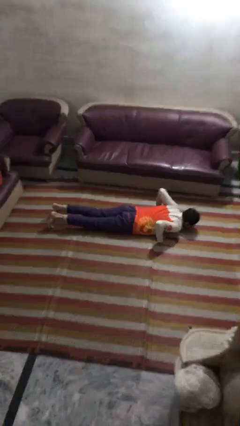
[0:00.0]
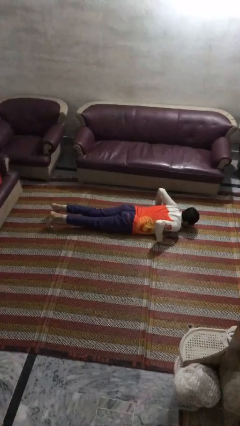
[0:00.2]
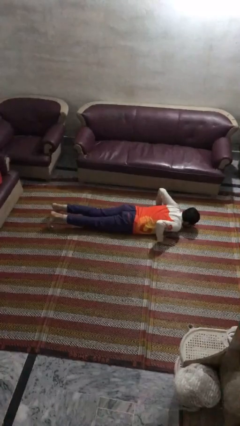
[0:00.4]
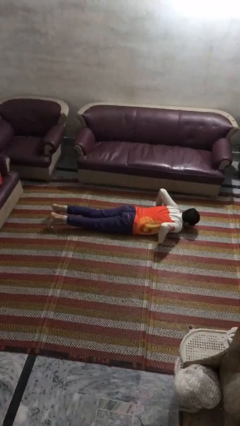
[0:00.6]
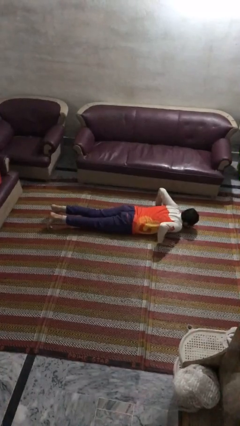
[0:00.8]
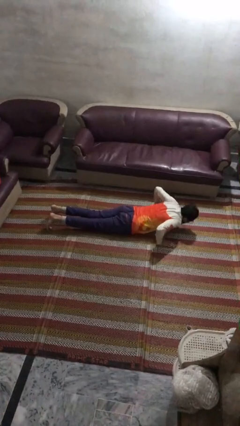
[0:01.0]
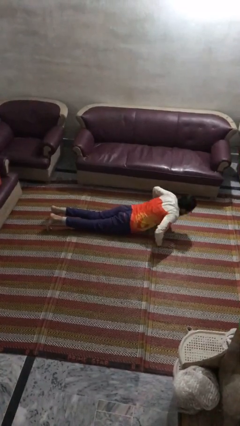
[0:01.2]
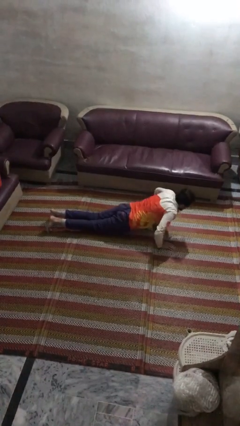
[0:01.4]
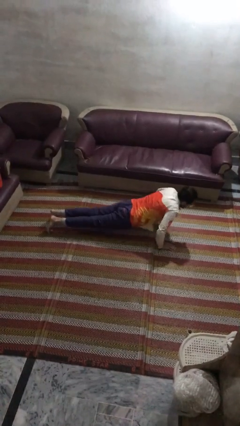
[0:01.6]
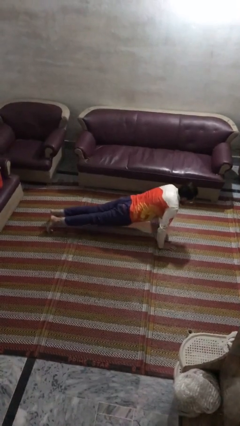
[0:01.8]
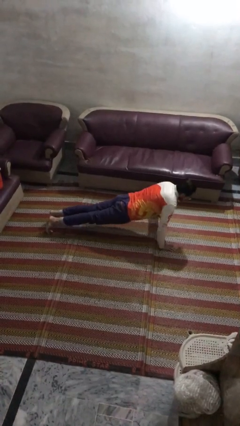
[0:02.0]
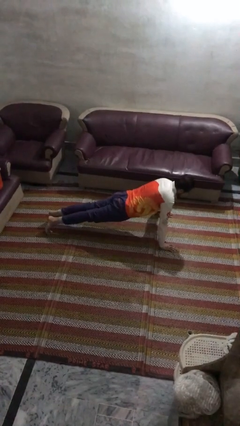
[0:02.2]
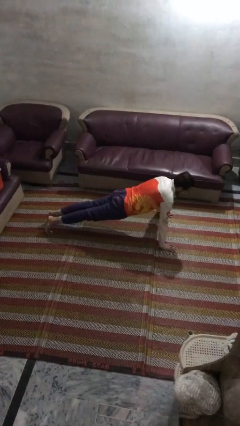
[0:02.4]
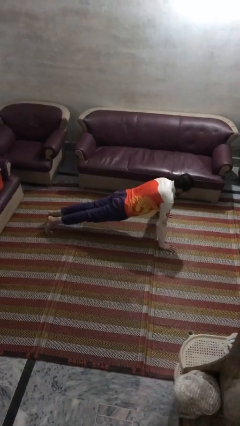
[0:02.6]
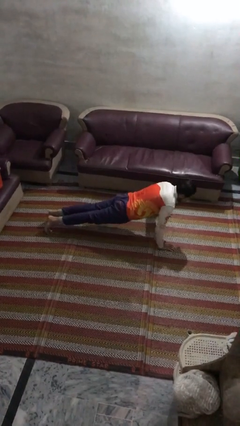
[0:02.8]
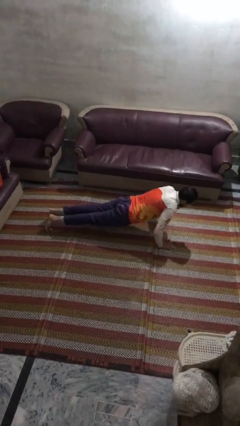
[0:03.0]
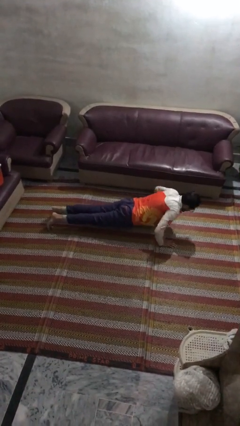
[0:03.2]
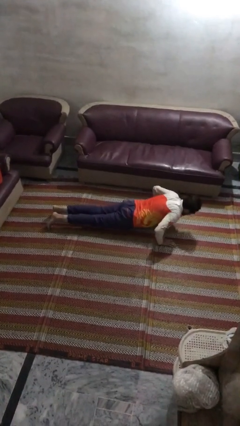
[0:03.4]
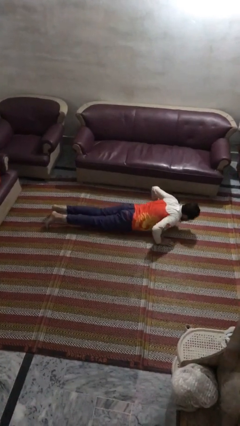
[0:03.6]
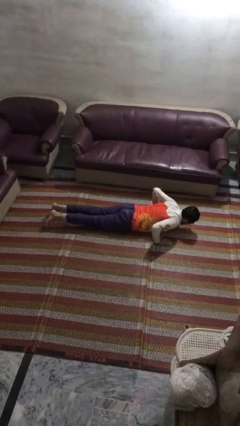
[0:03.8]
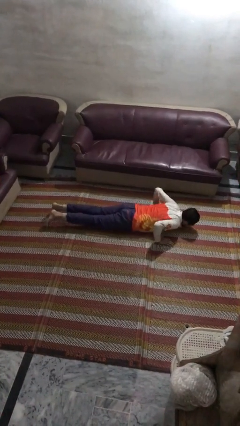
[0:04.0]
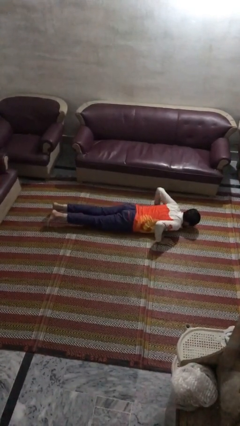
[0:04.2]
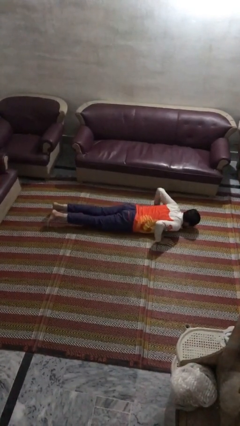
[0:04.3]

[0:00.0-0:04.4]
person exercises with pushup

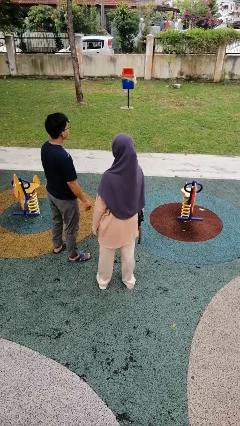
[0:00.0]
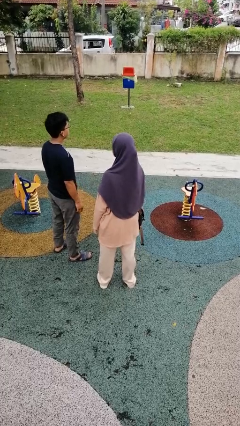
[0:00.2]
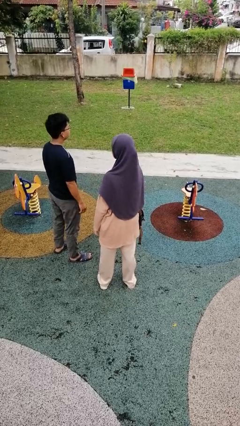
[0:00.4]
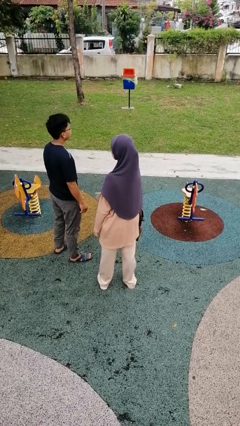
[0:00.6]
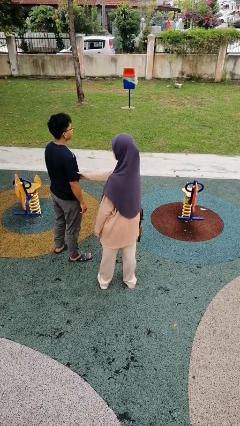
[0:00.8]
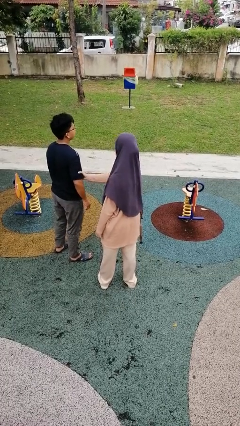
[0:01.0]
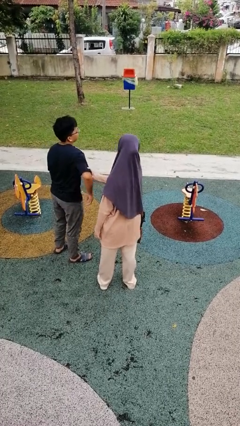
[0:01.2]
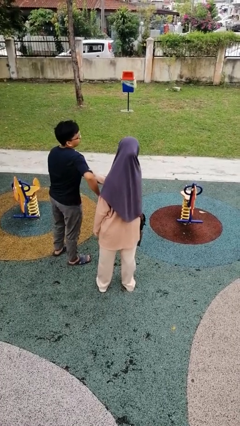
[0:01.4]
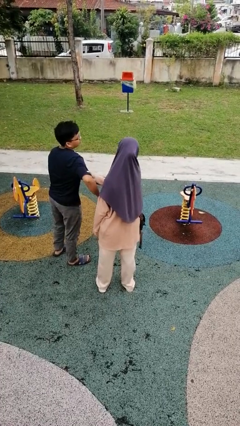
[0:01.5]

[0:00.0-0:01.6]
person grabs person by bicep

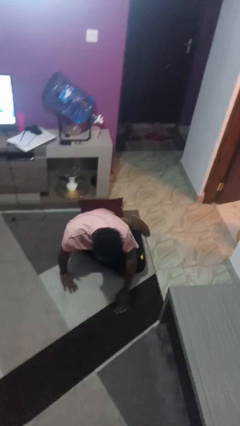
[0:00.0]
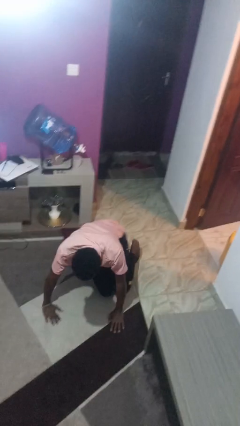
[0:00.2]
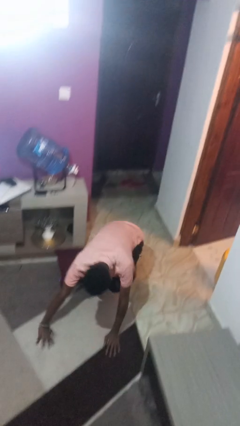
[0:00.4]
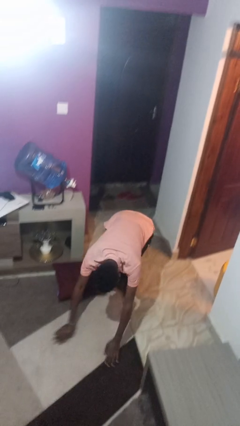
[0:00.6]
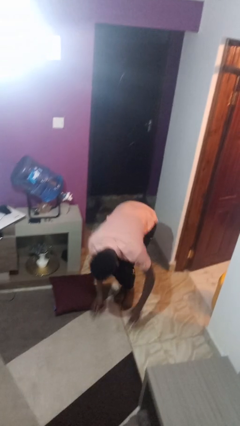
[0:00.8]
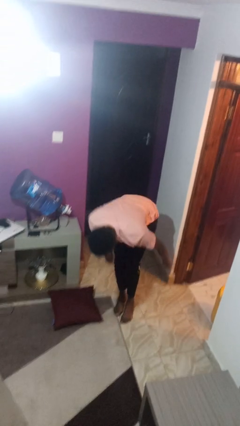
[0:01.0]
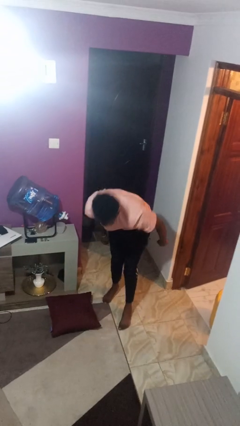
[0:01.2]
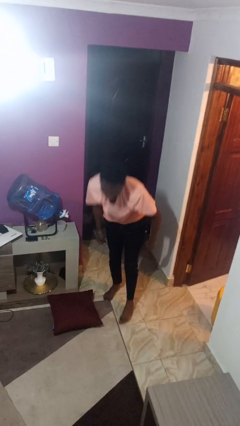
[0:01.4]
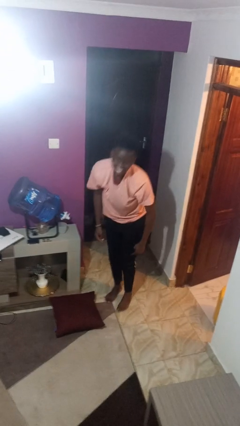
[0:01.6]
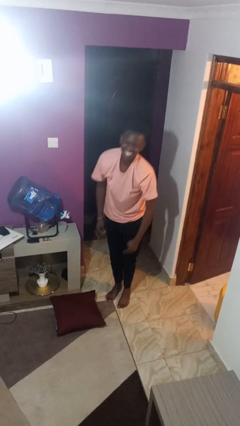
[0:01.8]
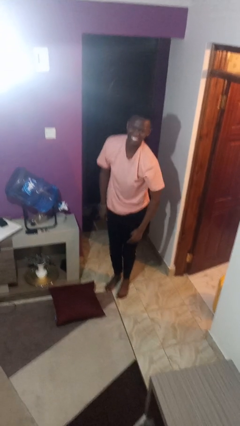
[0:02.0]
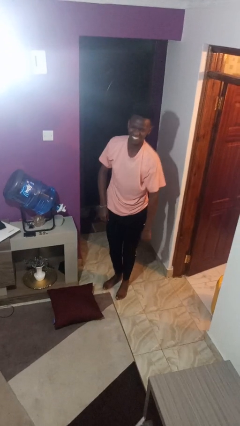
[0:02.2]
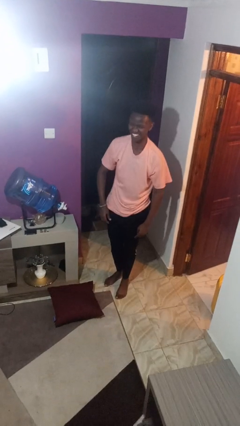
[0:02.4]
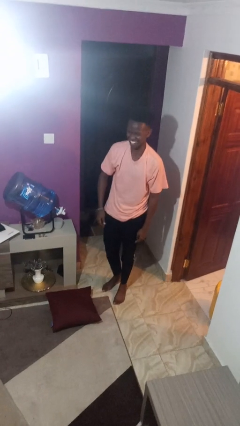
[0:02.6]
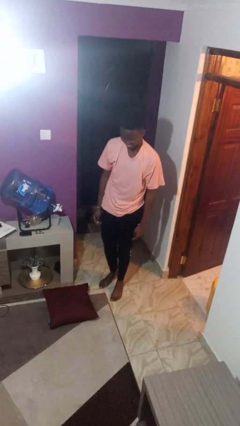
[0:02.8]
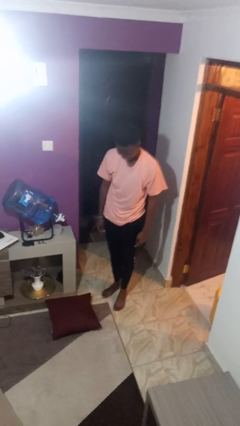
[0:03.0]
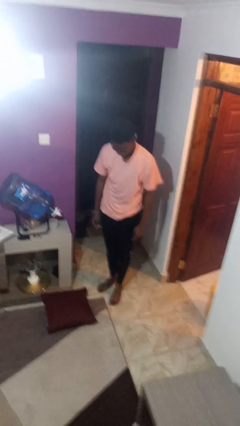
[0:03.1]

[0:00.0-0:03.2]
person stands up from floor

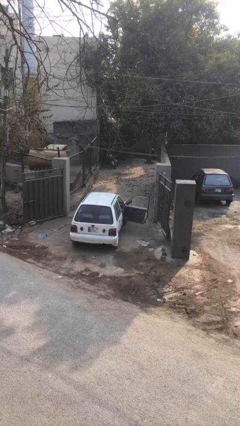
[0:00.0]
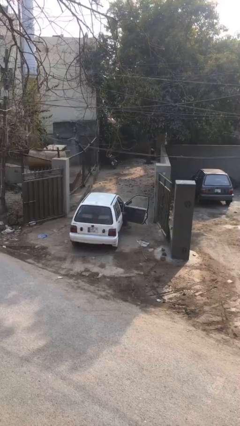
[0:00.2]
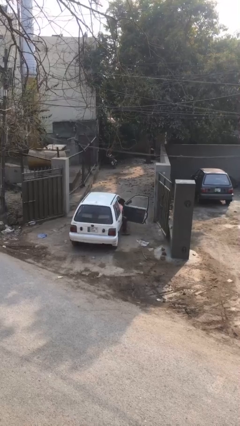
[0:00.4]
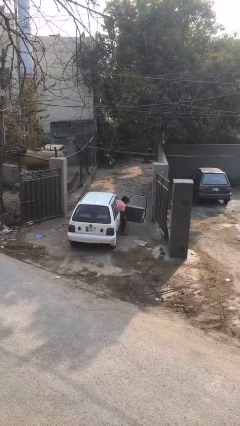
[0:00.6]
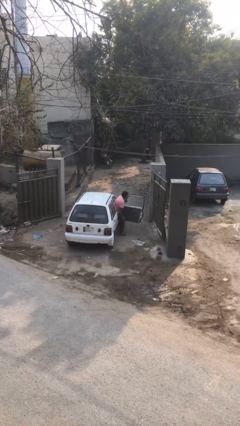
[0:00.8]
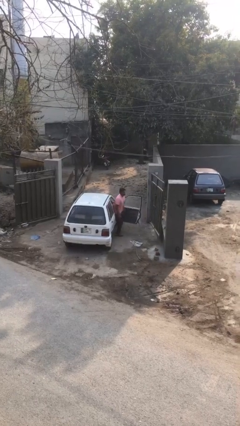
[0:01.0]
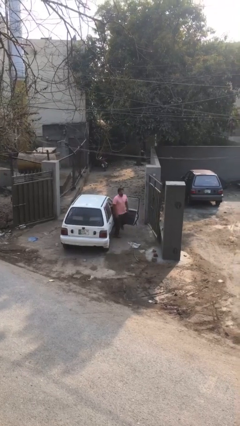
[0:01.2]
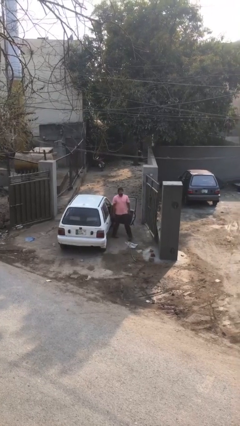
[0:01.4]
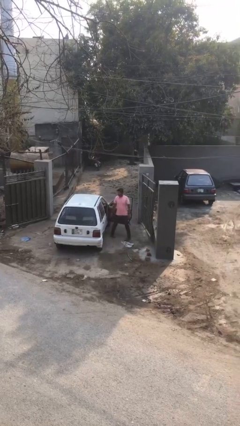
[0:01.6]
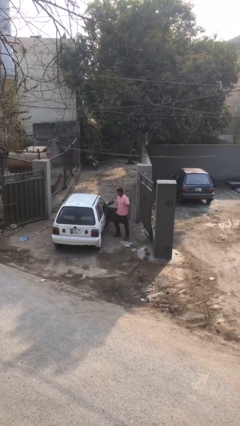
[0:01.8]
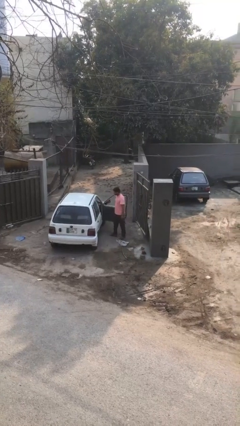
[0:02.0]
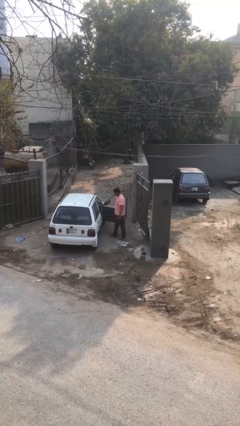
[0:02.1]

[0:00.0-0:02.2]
person exits car

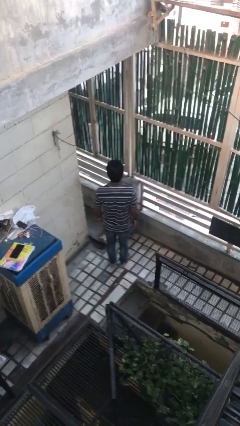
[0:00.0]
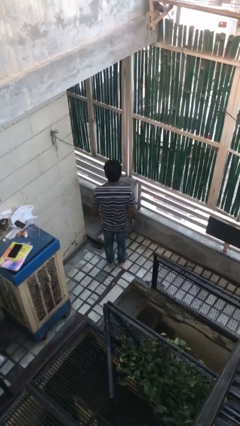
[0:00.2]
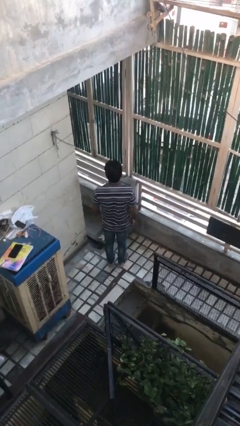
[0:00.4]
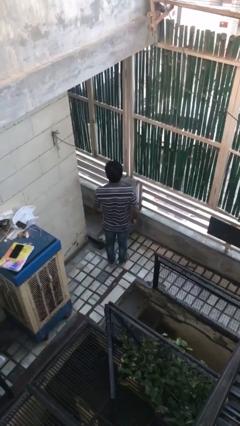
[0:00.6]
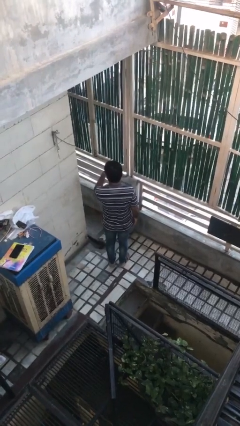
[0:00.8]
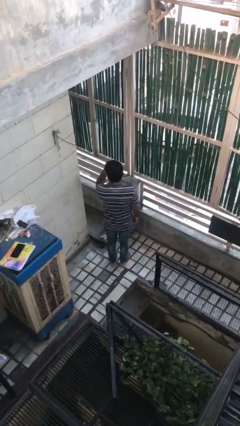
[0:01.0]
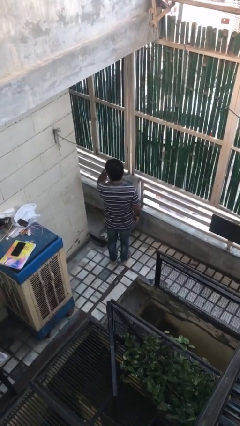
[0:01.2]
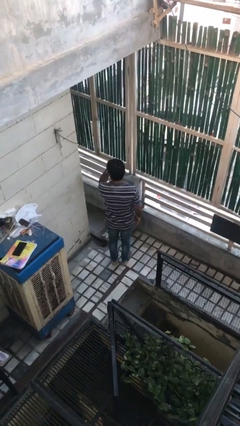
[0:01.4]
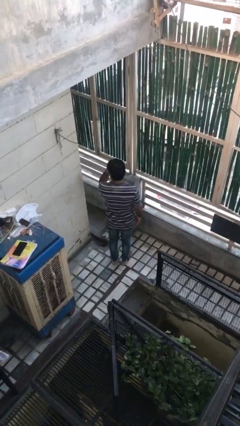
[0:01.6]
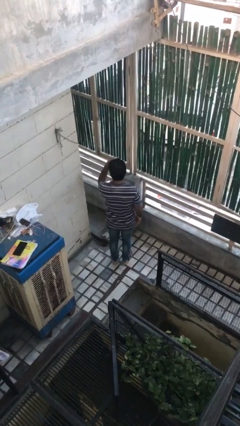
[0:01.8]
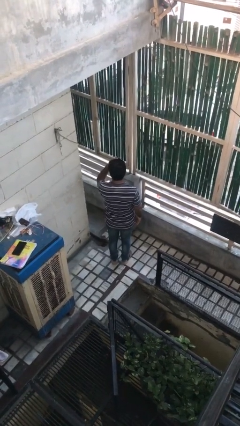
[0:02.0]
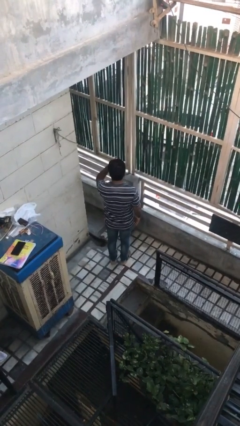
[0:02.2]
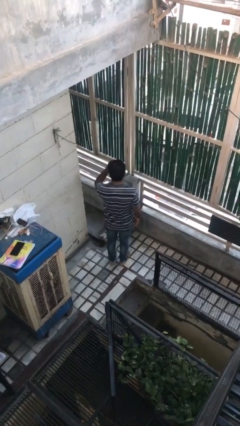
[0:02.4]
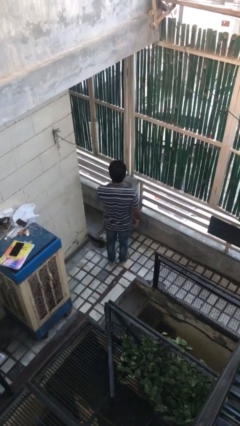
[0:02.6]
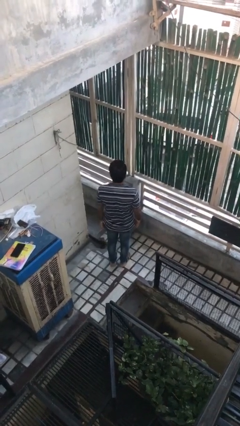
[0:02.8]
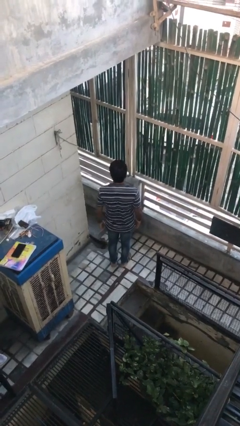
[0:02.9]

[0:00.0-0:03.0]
person gestures watch closely

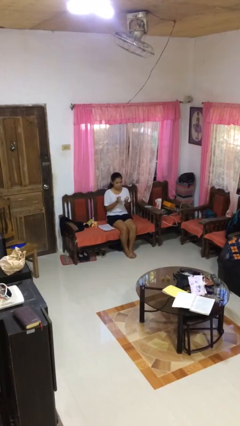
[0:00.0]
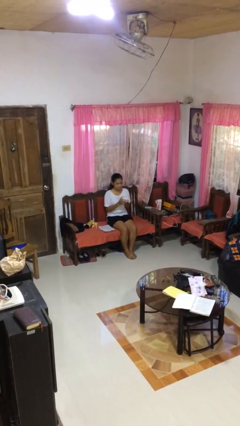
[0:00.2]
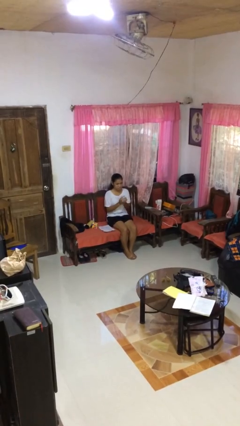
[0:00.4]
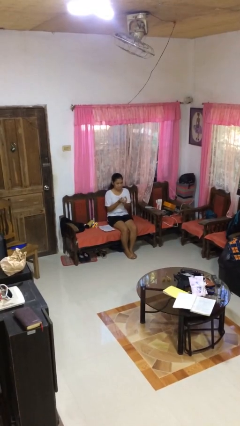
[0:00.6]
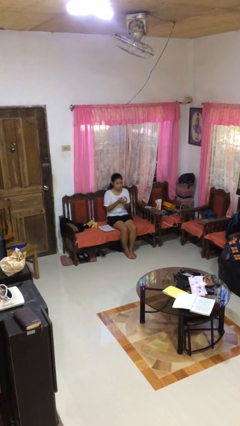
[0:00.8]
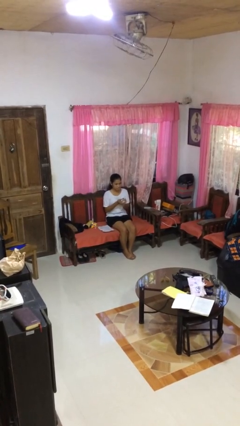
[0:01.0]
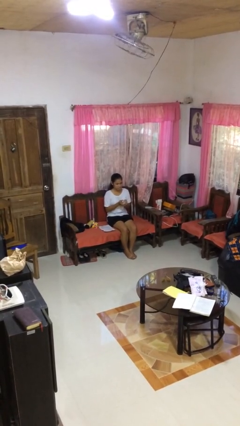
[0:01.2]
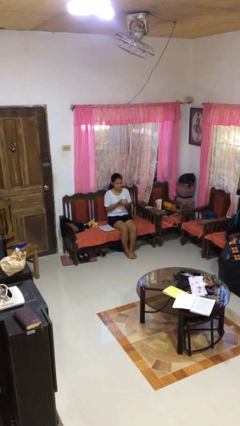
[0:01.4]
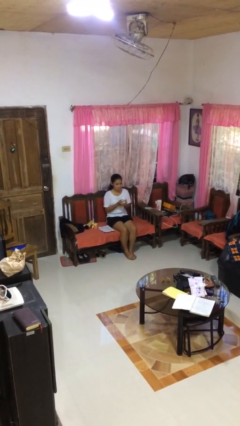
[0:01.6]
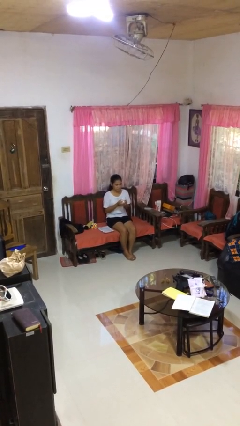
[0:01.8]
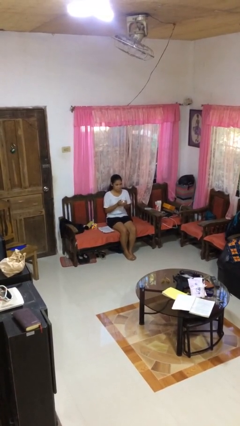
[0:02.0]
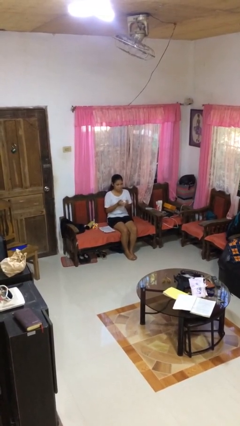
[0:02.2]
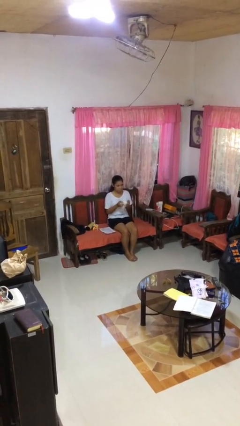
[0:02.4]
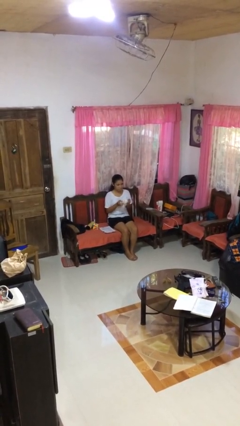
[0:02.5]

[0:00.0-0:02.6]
person crumples paper

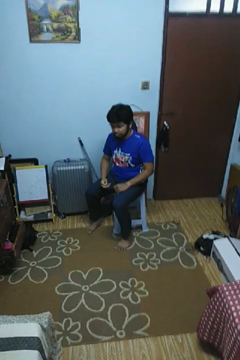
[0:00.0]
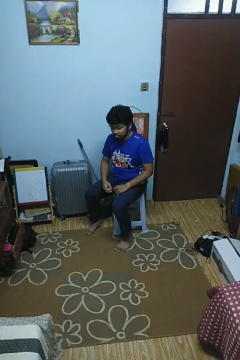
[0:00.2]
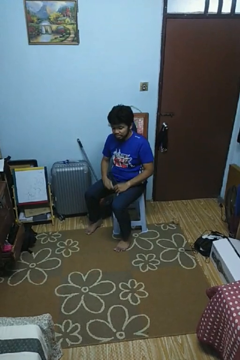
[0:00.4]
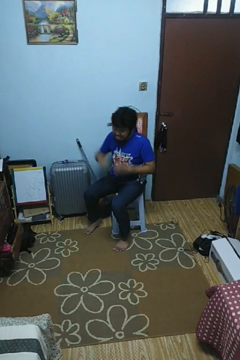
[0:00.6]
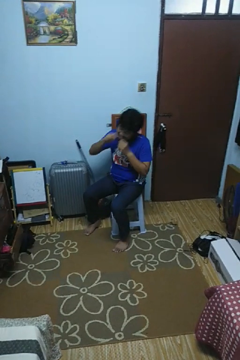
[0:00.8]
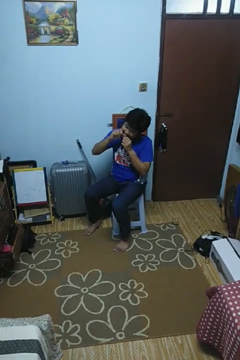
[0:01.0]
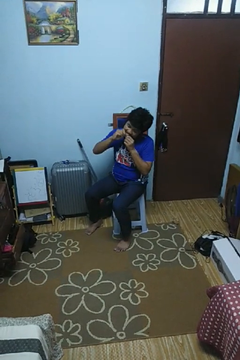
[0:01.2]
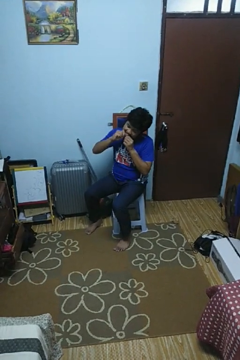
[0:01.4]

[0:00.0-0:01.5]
person flosses
